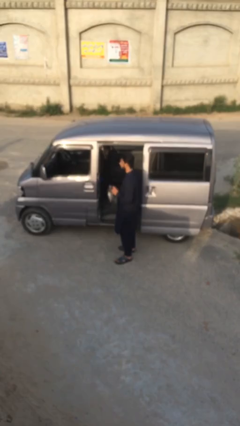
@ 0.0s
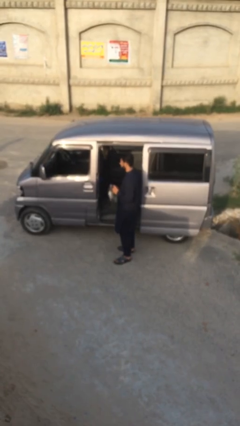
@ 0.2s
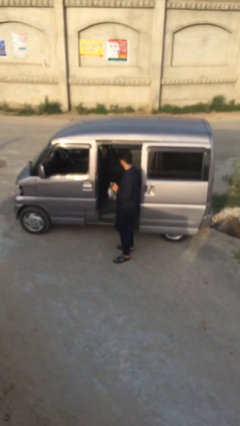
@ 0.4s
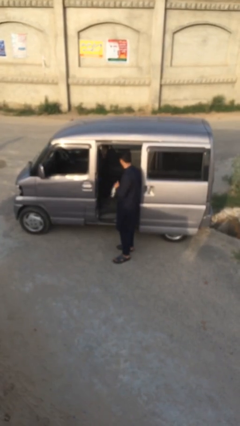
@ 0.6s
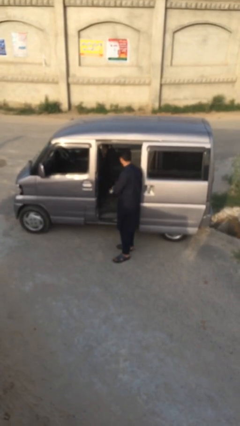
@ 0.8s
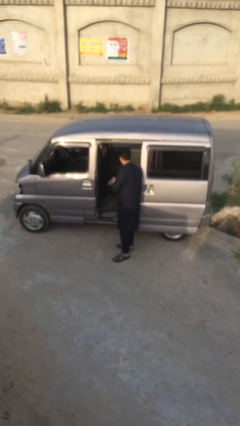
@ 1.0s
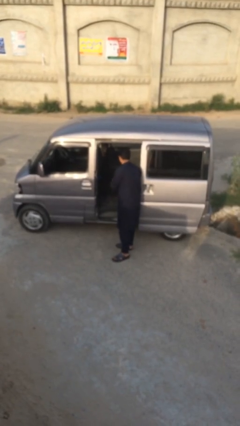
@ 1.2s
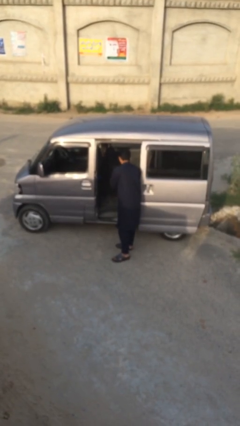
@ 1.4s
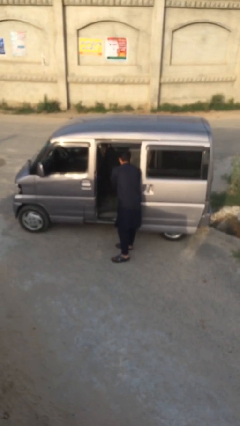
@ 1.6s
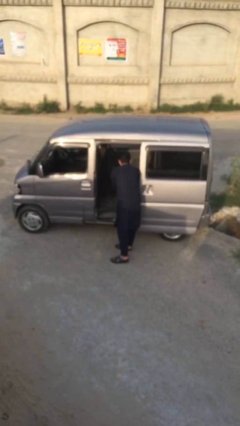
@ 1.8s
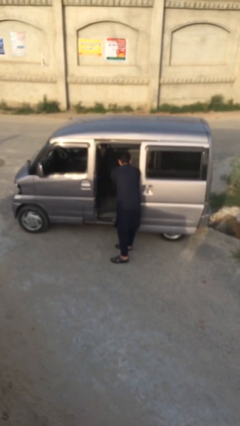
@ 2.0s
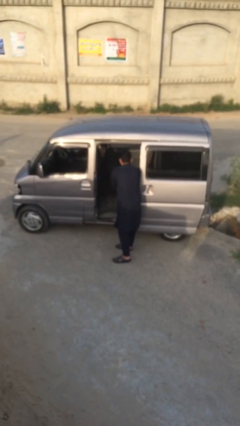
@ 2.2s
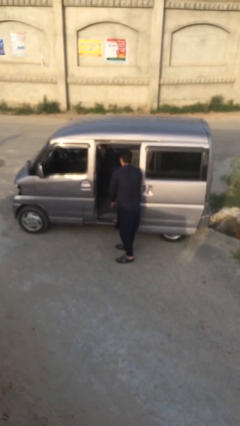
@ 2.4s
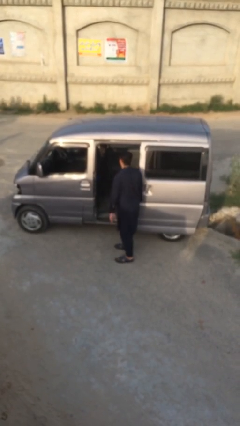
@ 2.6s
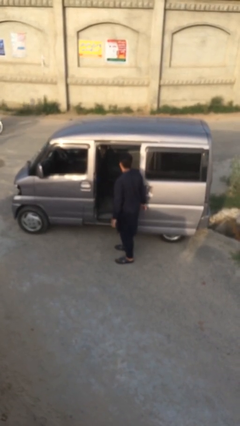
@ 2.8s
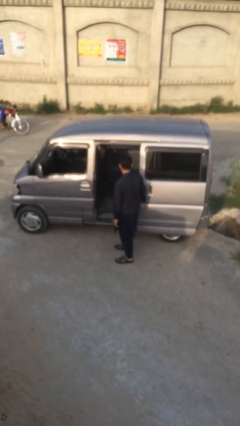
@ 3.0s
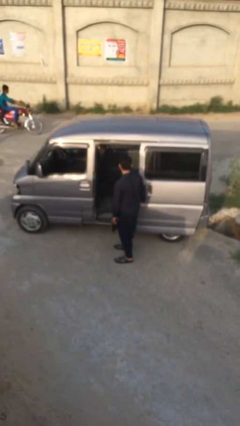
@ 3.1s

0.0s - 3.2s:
person loads car

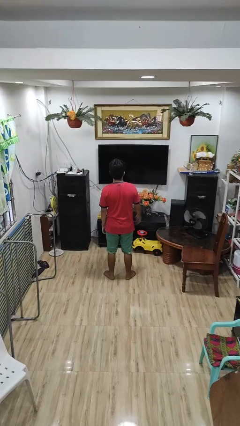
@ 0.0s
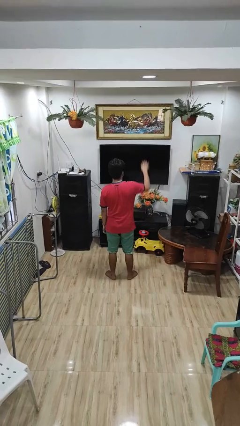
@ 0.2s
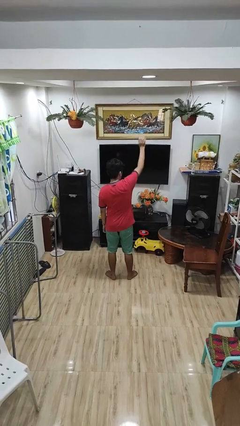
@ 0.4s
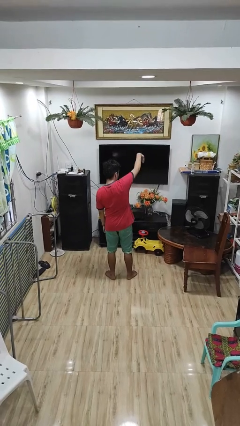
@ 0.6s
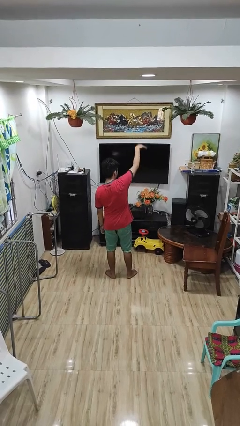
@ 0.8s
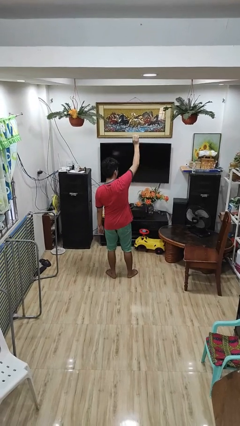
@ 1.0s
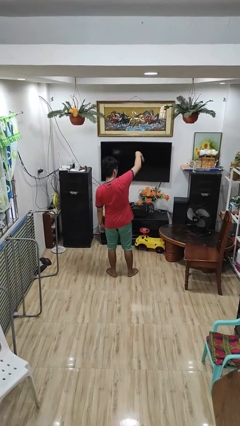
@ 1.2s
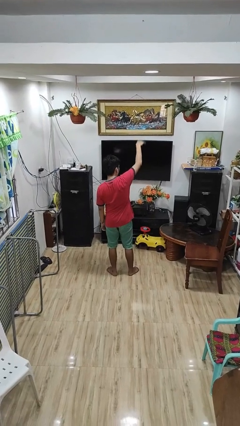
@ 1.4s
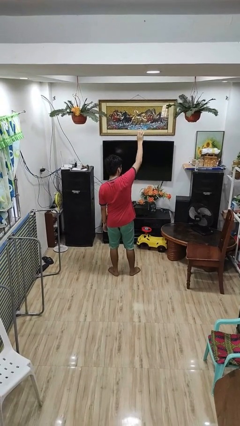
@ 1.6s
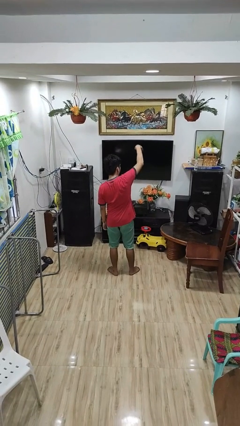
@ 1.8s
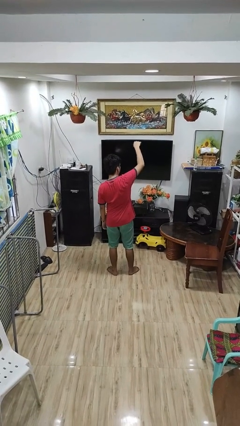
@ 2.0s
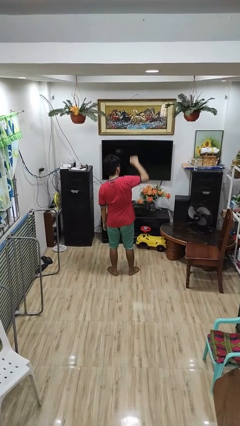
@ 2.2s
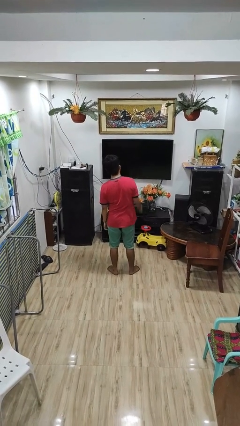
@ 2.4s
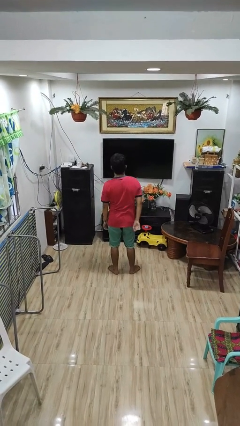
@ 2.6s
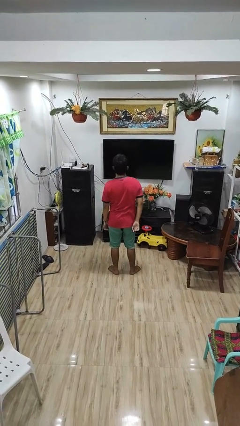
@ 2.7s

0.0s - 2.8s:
person gestures come here

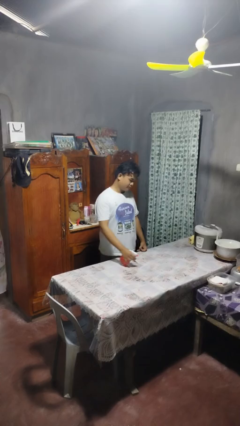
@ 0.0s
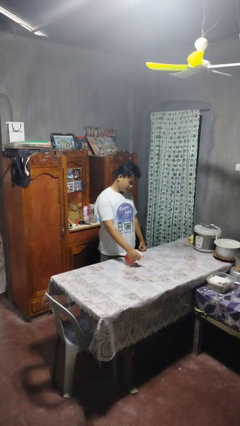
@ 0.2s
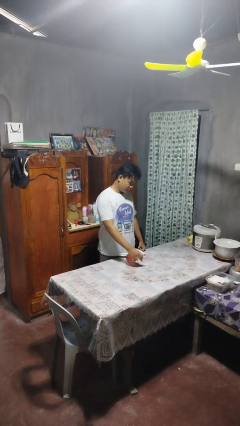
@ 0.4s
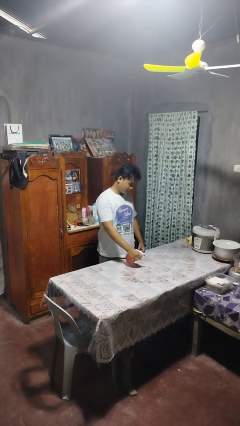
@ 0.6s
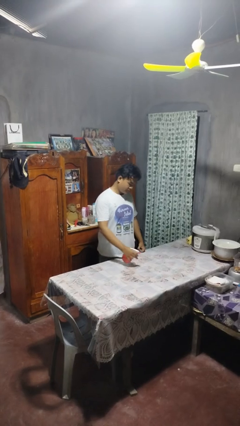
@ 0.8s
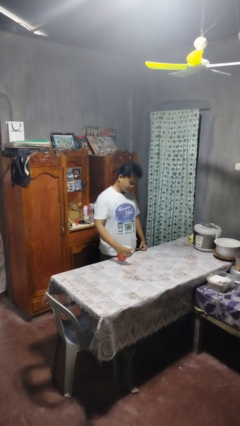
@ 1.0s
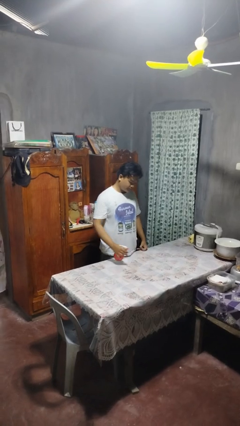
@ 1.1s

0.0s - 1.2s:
person sprays from bottle

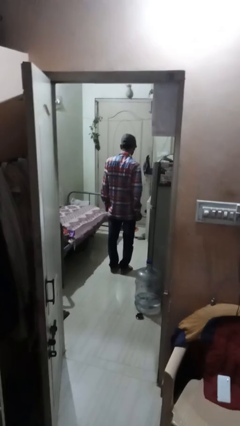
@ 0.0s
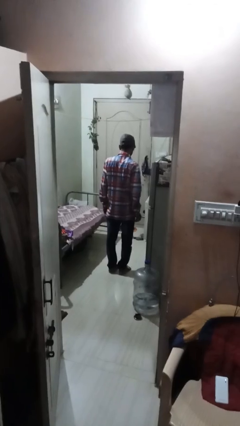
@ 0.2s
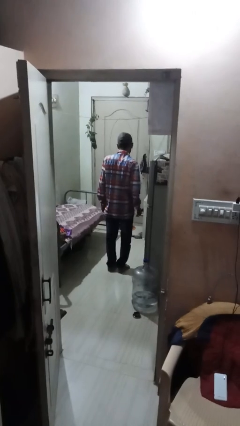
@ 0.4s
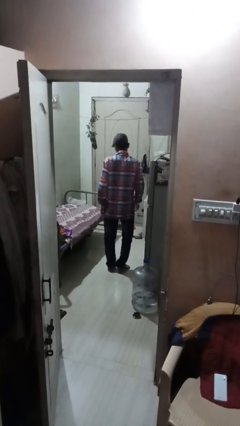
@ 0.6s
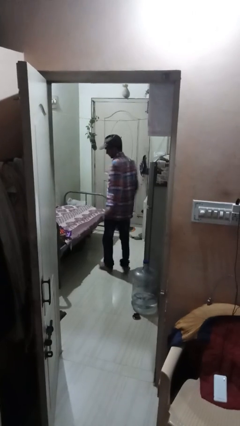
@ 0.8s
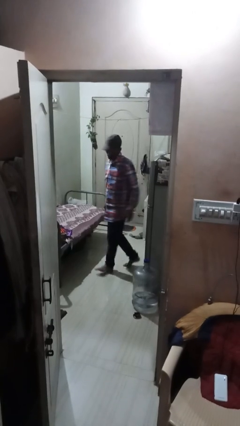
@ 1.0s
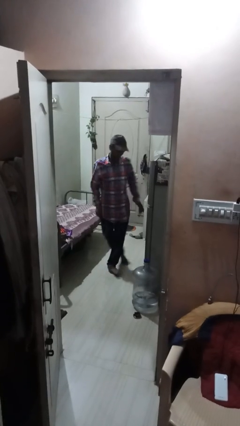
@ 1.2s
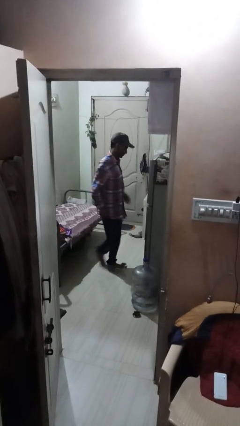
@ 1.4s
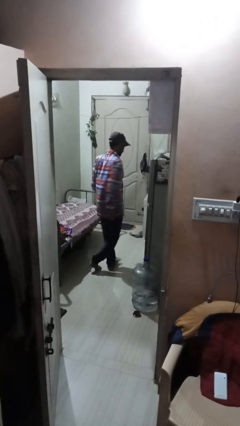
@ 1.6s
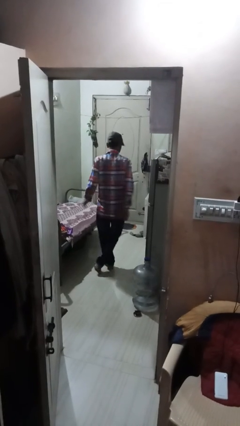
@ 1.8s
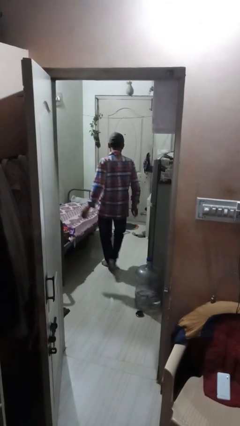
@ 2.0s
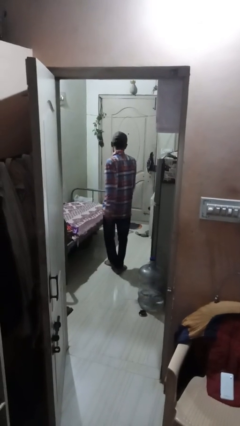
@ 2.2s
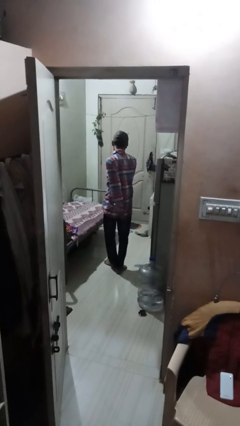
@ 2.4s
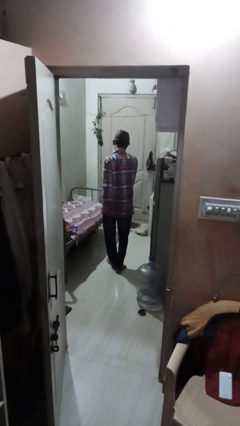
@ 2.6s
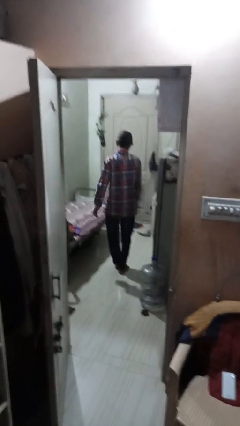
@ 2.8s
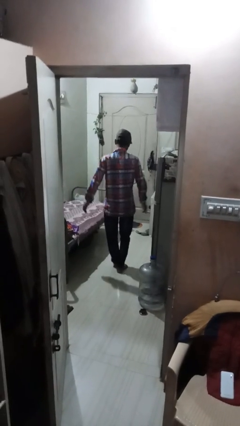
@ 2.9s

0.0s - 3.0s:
person twirls

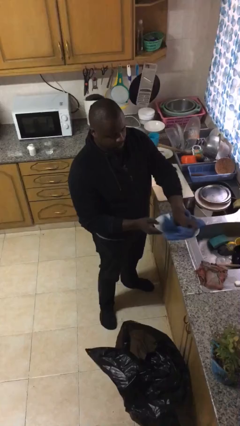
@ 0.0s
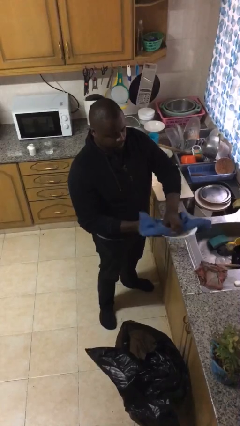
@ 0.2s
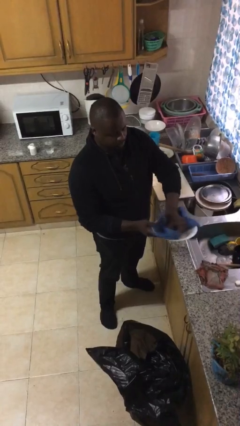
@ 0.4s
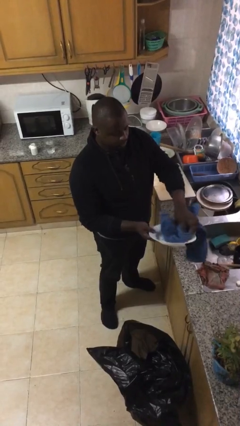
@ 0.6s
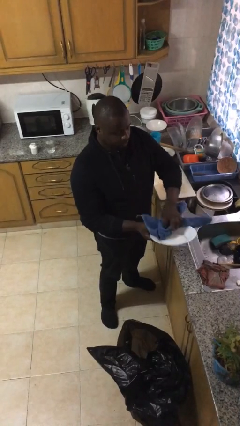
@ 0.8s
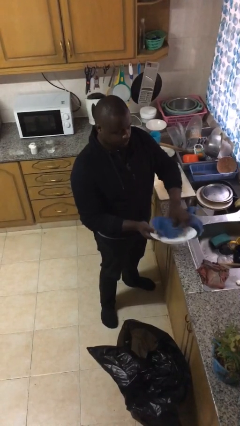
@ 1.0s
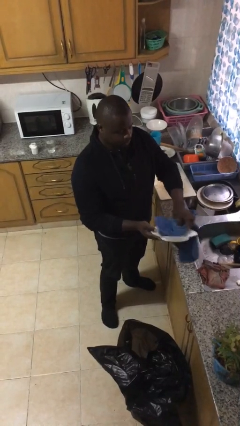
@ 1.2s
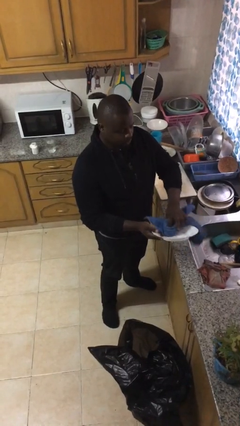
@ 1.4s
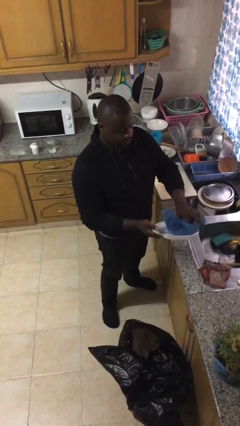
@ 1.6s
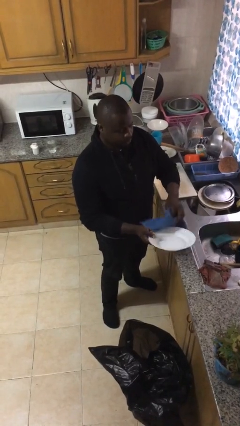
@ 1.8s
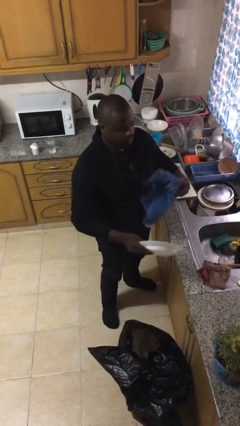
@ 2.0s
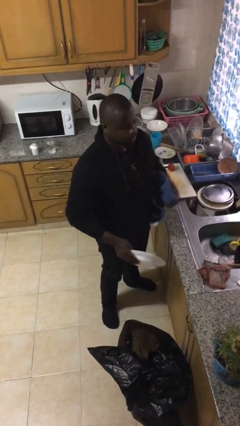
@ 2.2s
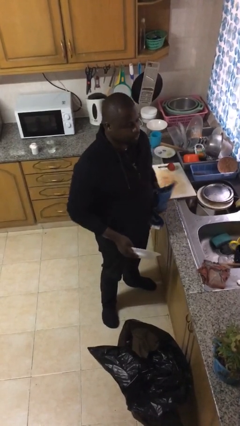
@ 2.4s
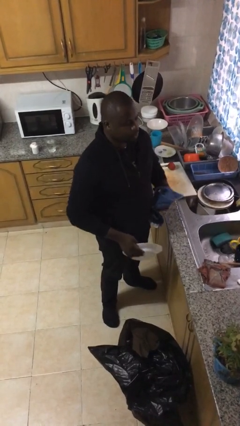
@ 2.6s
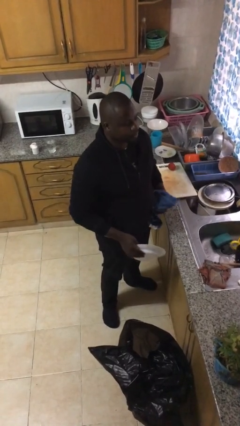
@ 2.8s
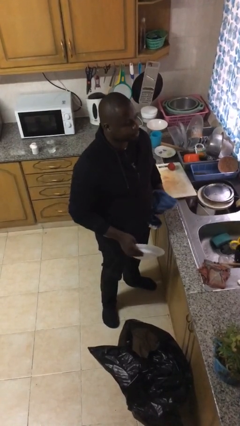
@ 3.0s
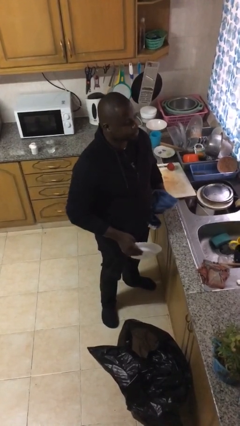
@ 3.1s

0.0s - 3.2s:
person dries dish

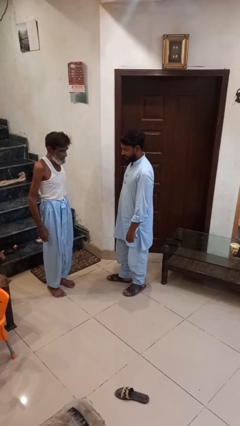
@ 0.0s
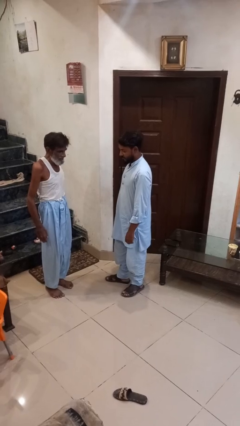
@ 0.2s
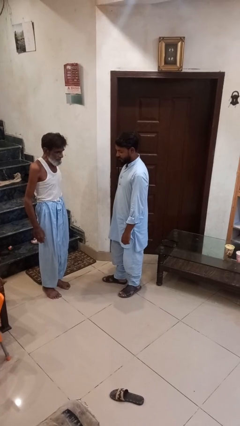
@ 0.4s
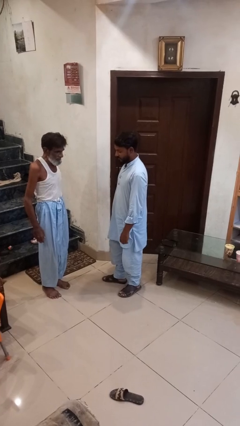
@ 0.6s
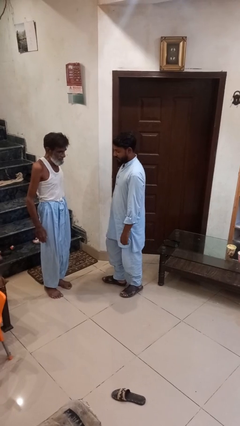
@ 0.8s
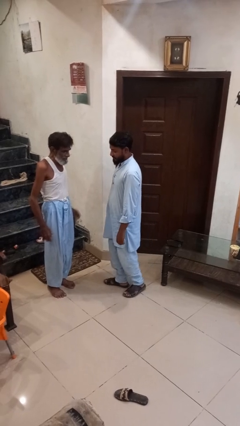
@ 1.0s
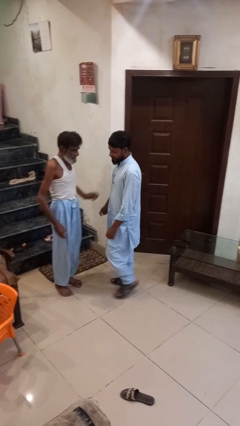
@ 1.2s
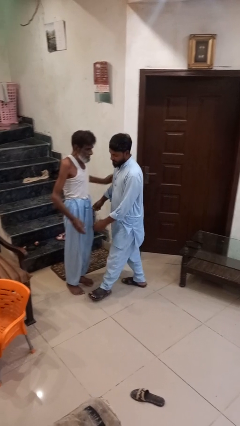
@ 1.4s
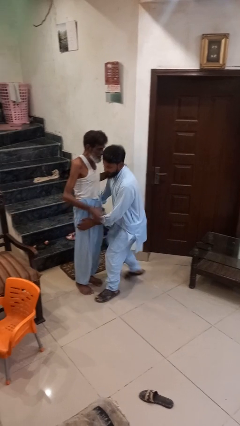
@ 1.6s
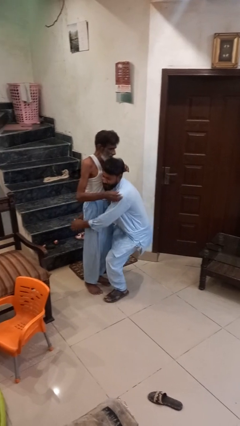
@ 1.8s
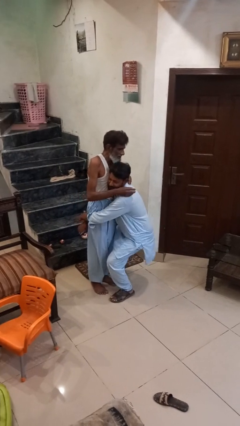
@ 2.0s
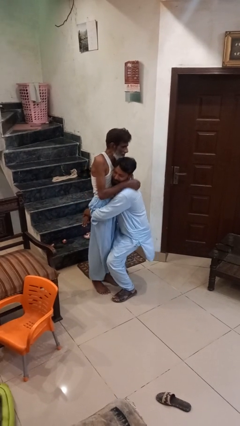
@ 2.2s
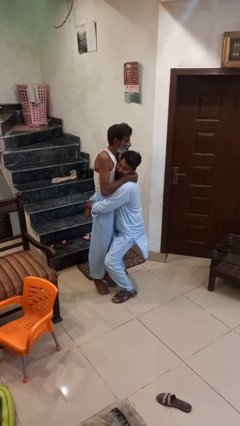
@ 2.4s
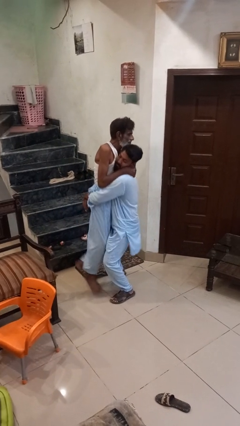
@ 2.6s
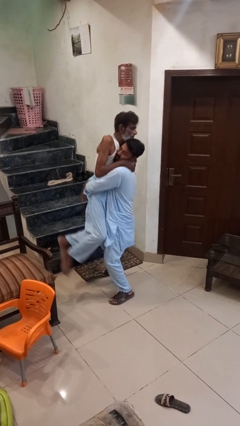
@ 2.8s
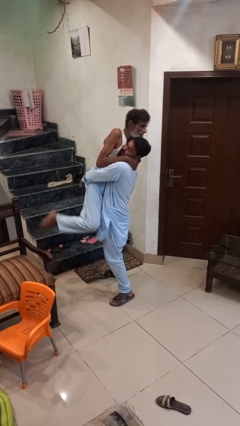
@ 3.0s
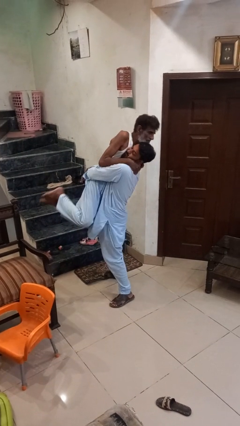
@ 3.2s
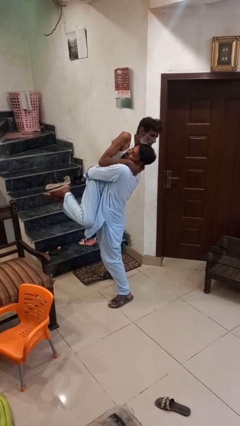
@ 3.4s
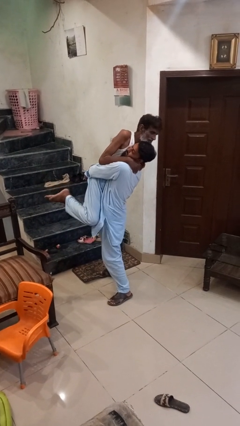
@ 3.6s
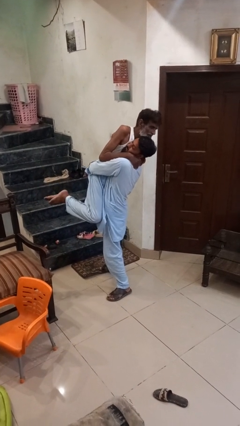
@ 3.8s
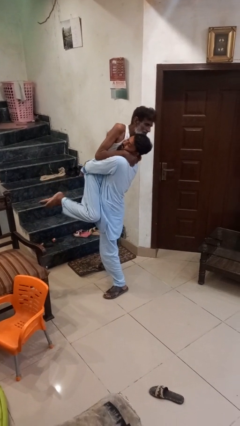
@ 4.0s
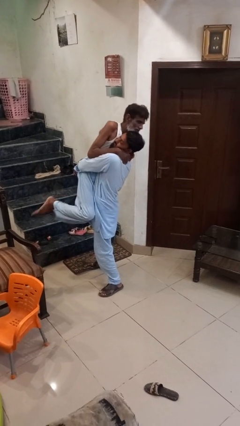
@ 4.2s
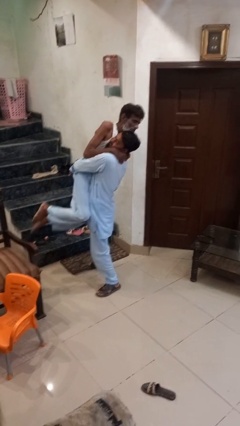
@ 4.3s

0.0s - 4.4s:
person picks up person
